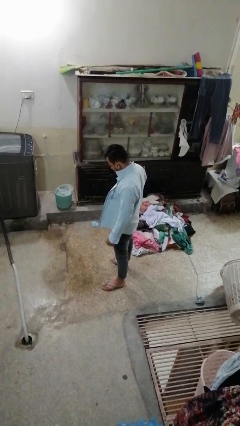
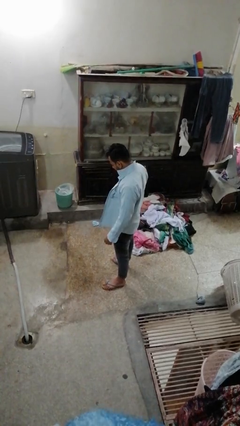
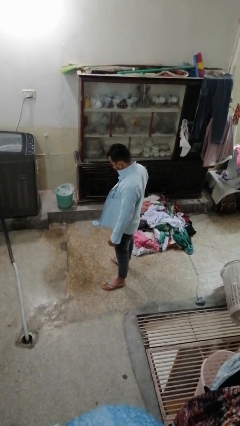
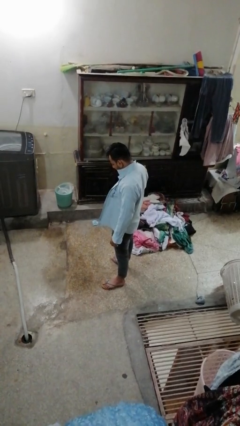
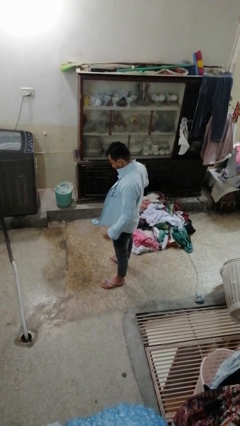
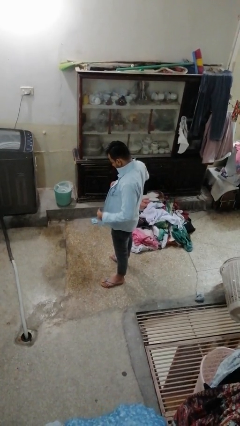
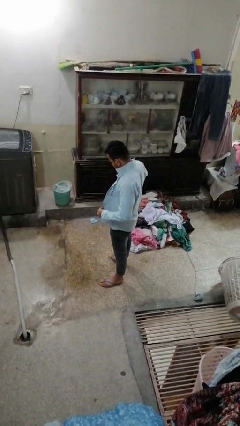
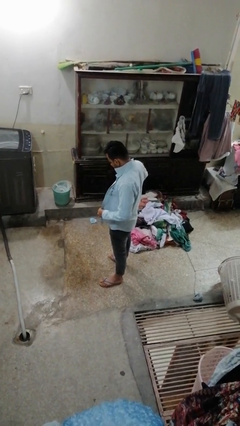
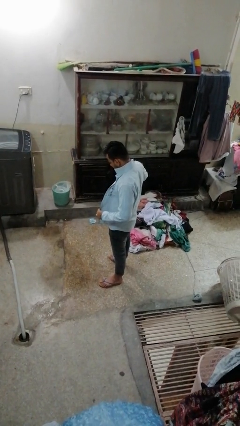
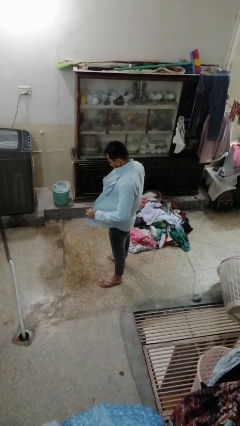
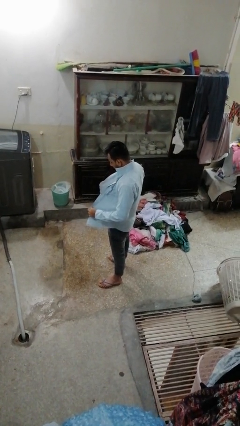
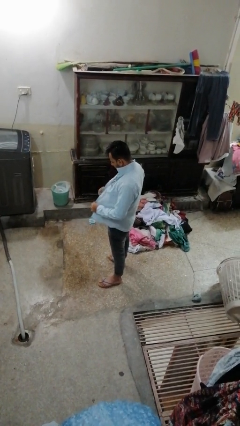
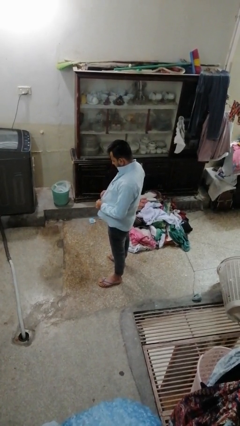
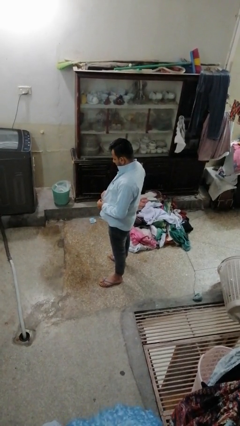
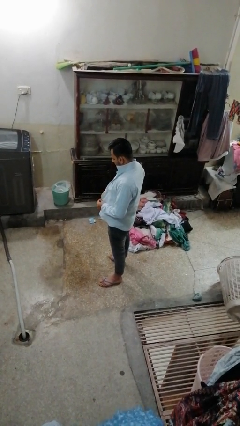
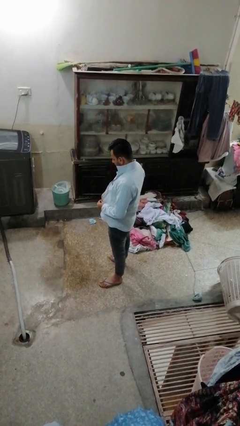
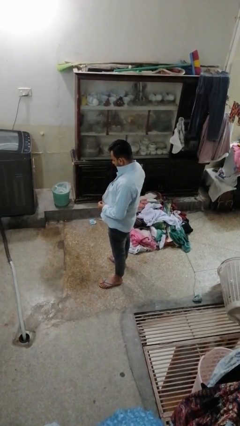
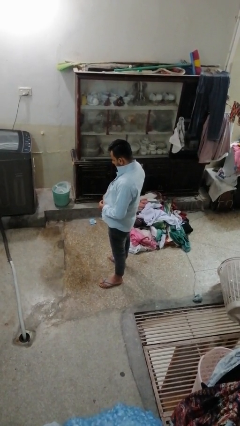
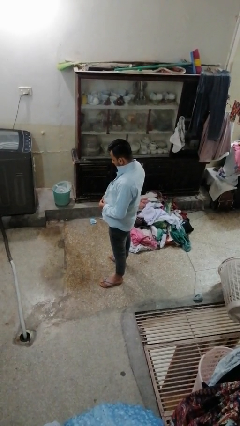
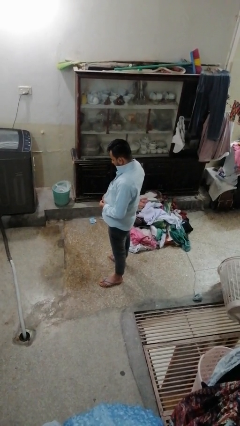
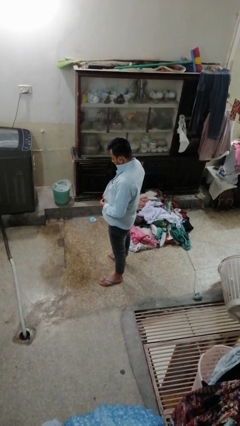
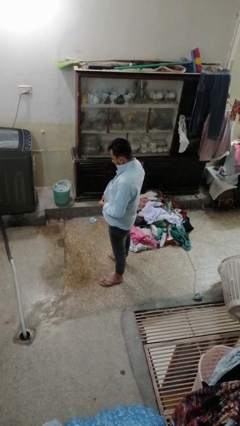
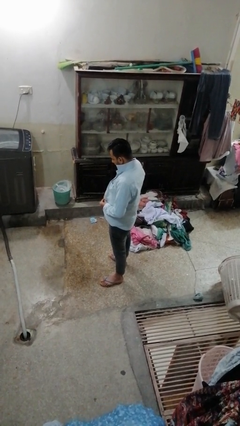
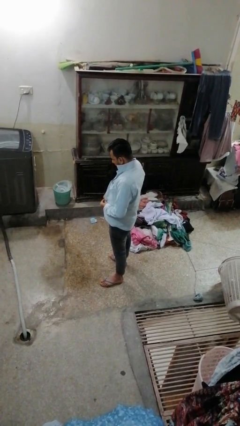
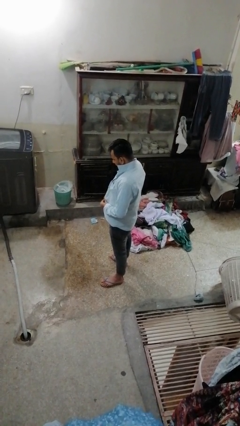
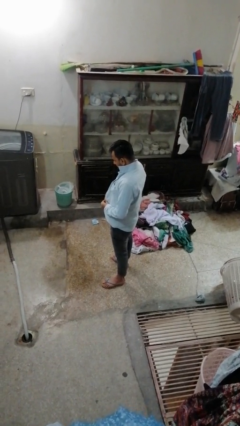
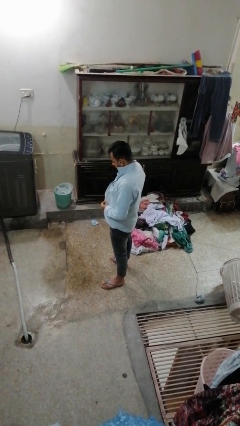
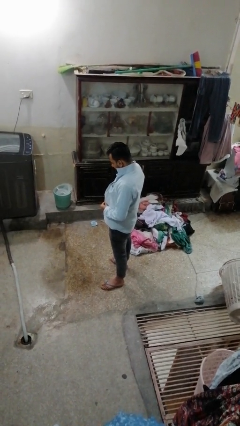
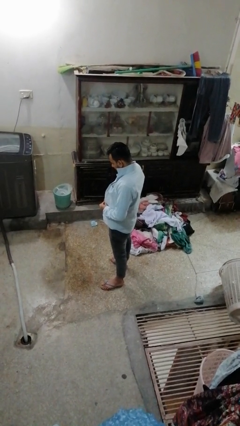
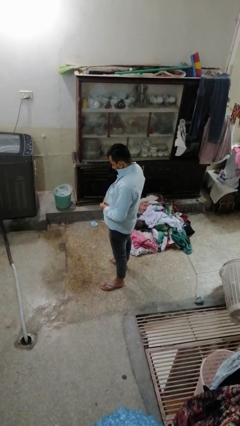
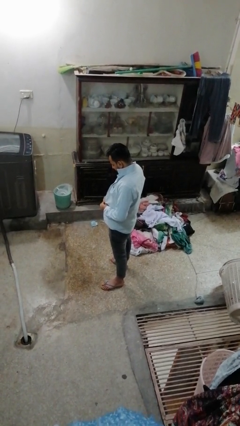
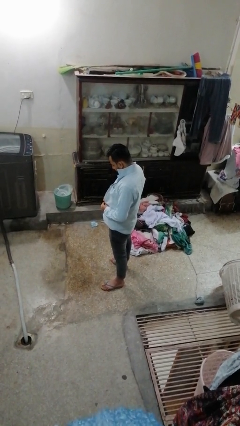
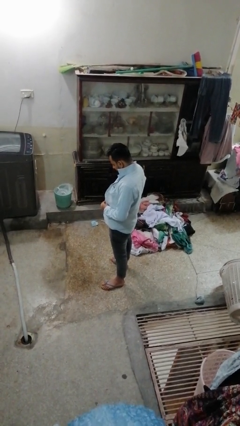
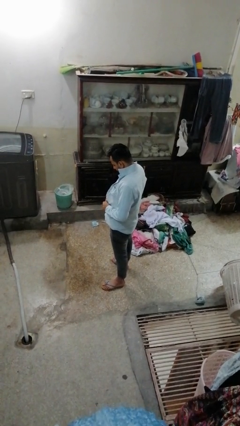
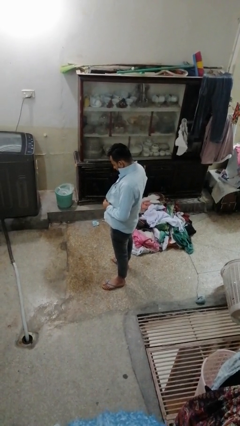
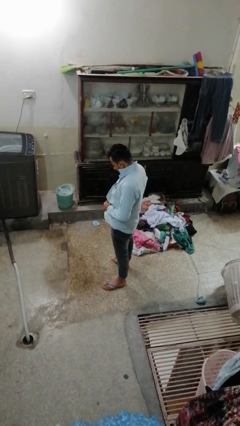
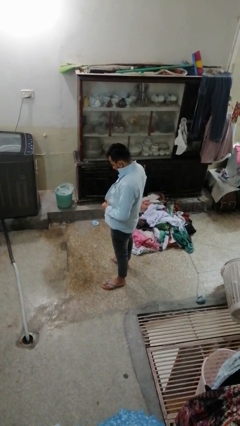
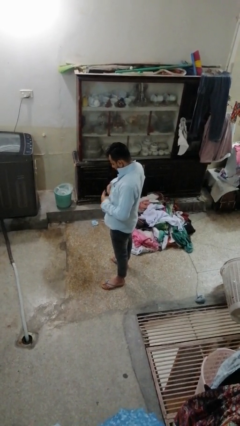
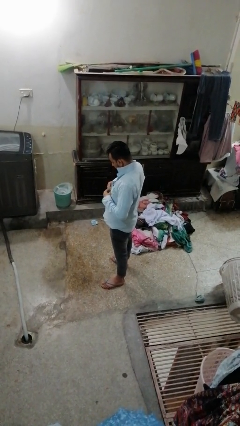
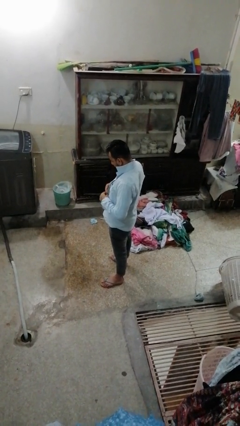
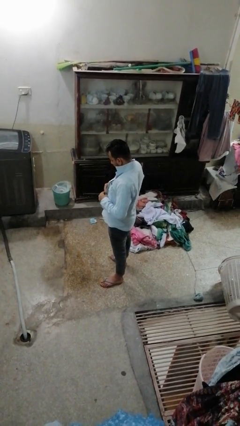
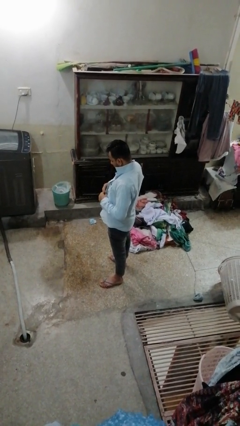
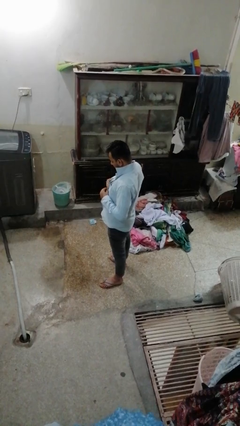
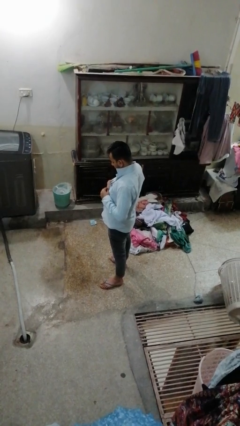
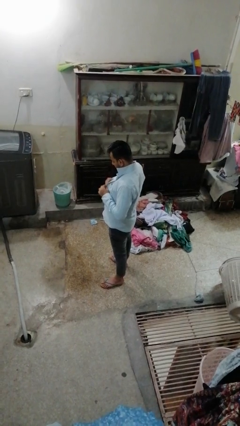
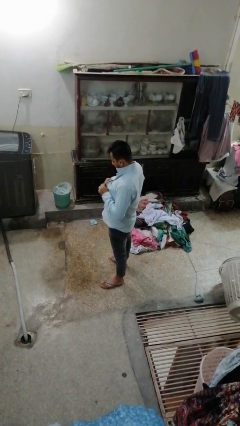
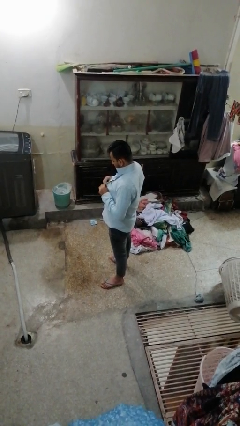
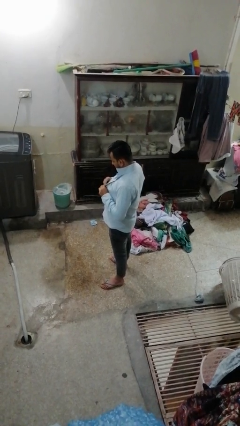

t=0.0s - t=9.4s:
person buttons shirt

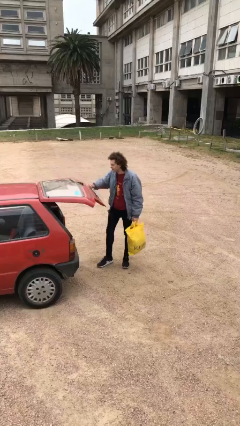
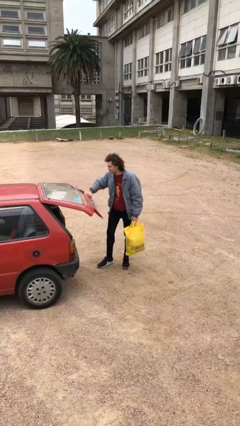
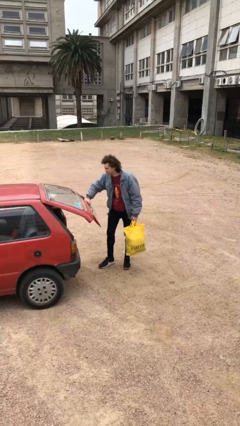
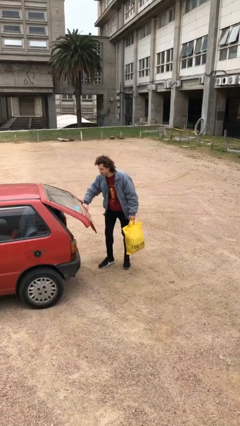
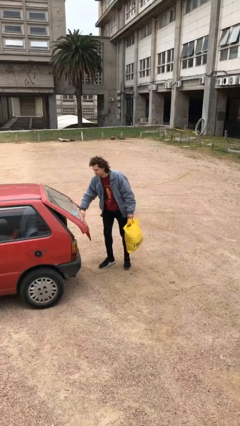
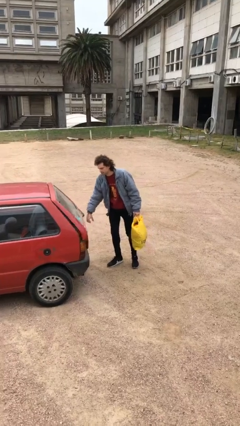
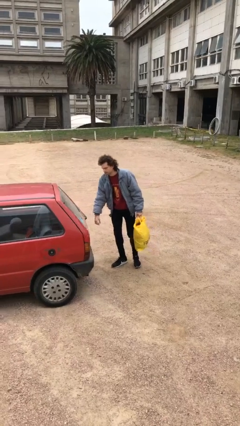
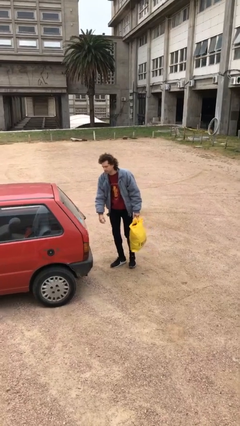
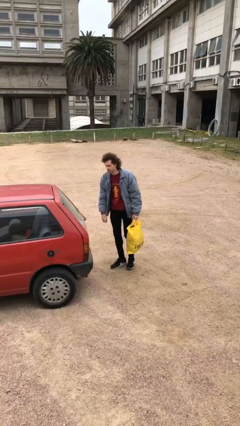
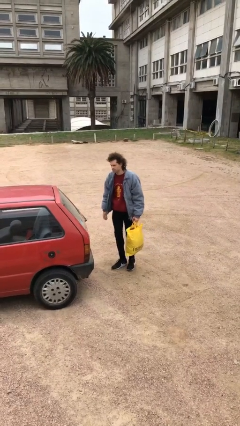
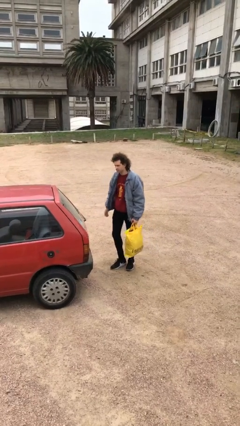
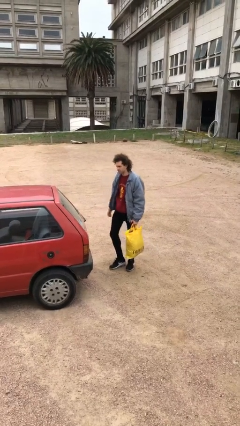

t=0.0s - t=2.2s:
person closes car trunk

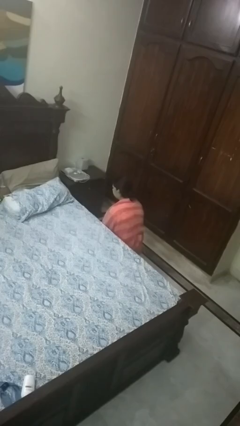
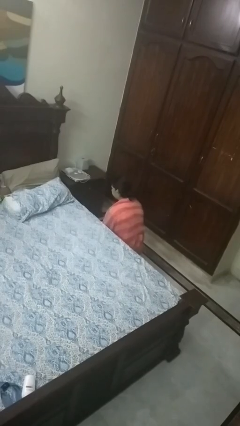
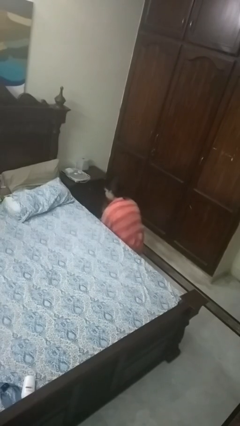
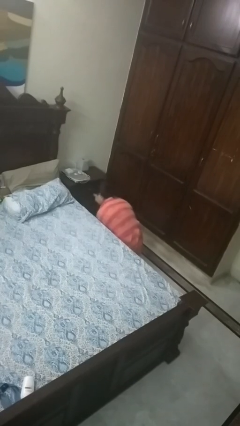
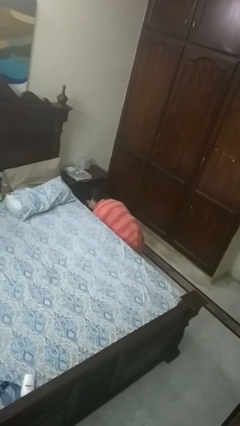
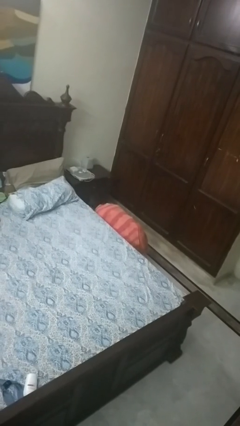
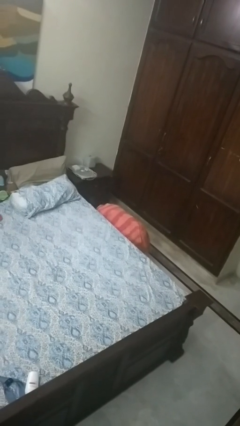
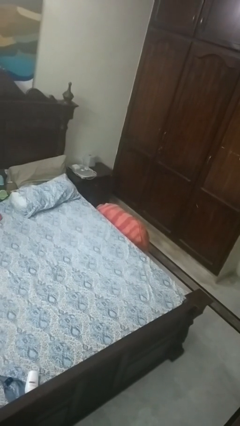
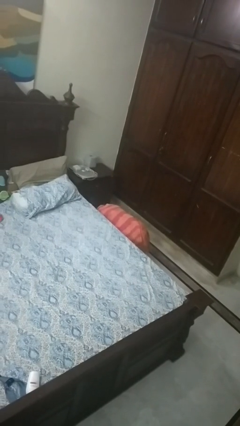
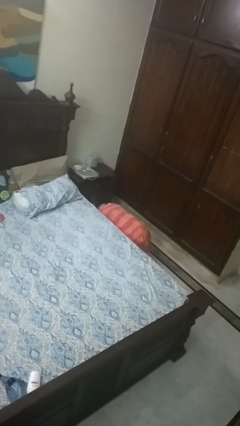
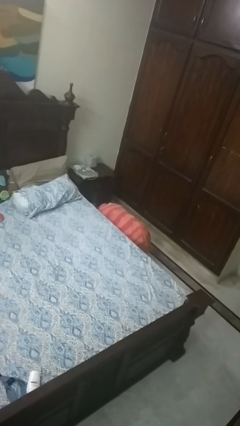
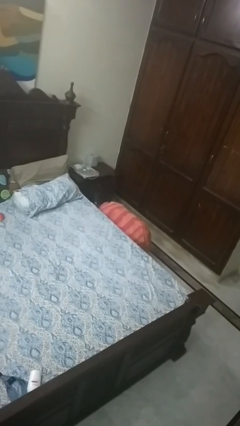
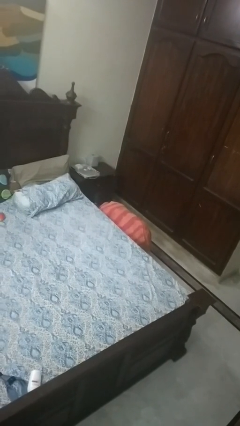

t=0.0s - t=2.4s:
person searches under bed

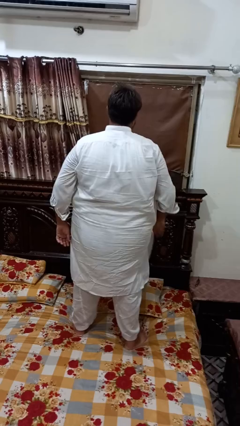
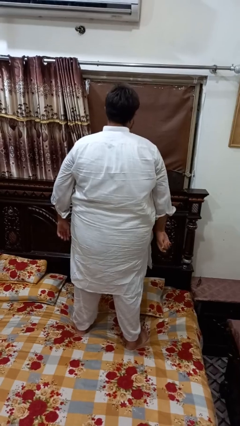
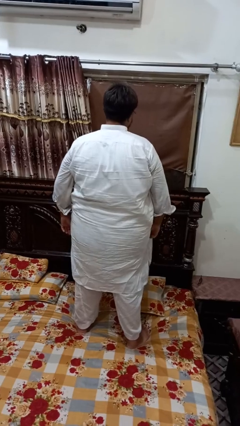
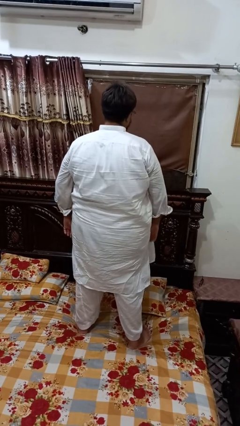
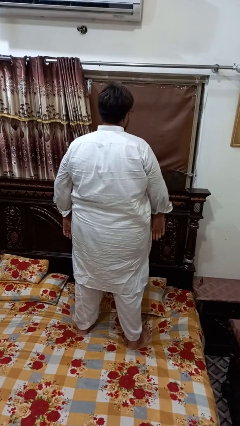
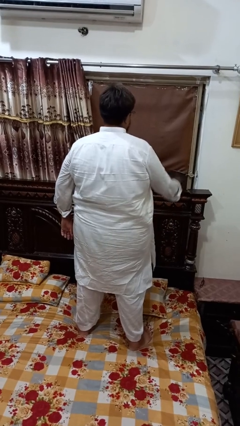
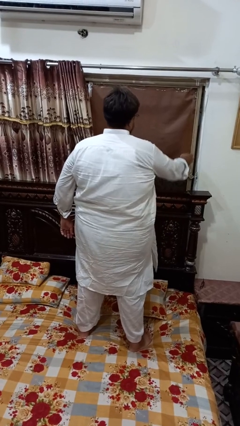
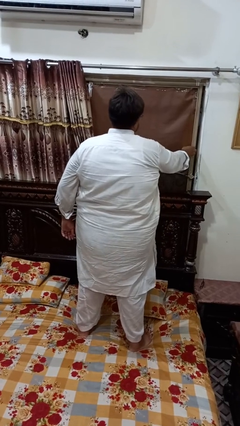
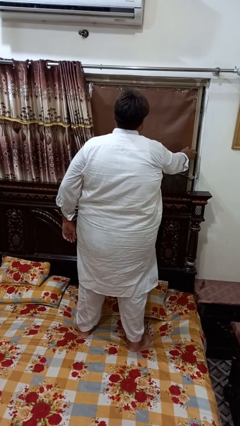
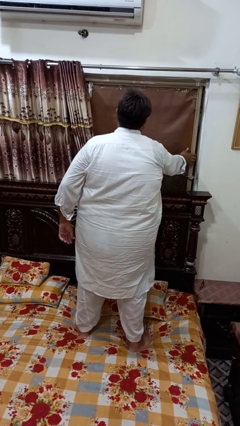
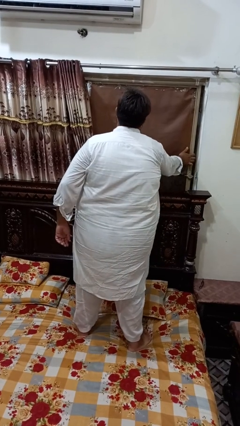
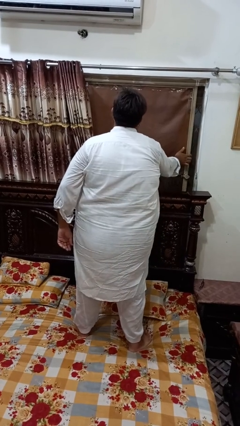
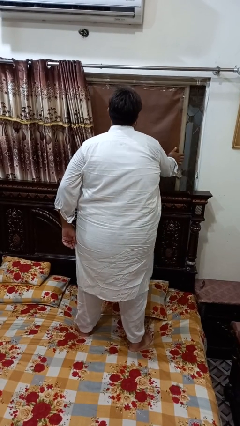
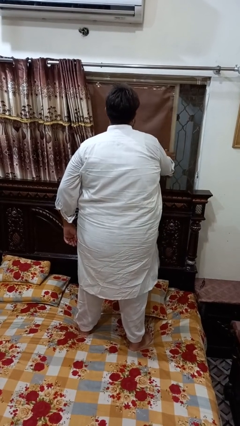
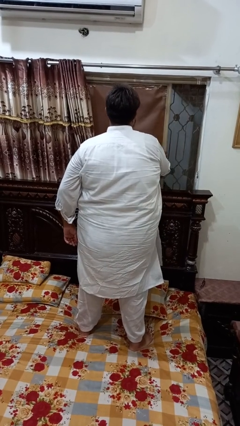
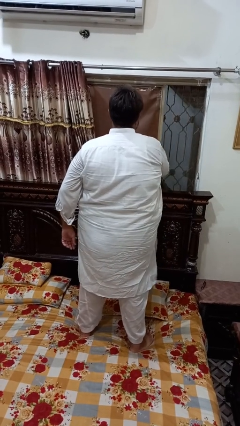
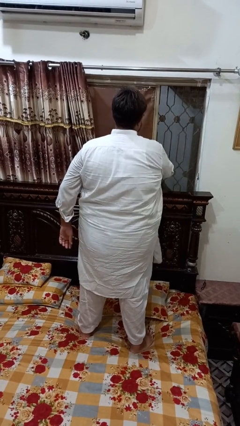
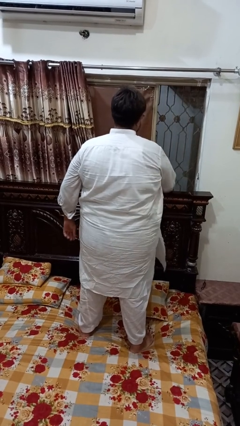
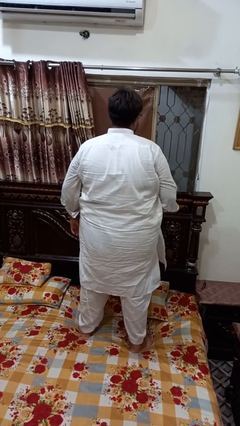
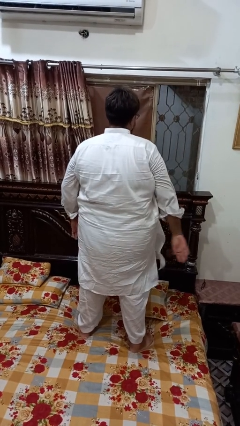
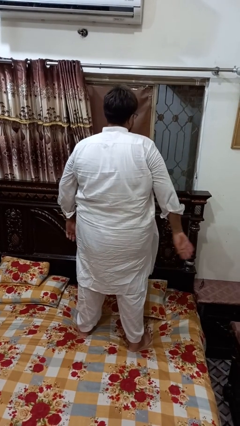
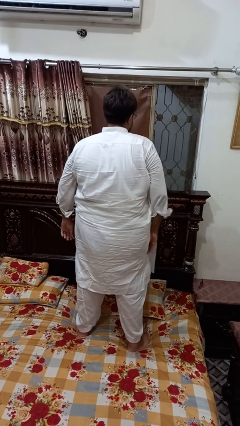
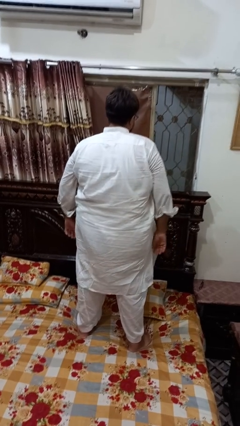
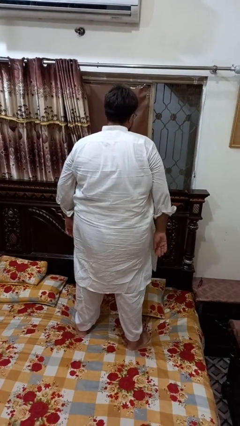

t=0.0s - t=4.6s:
person opens home window
